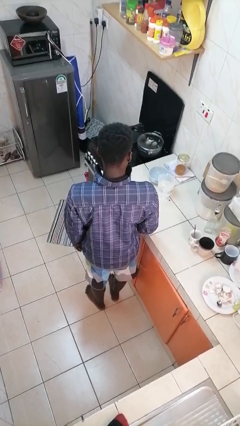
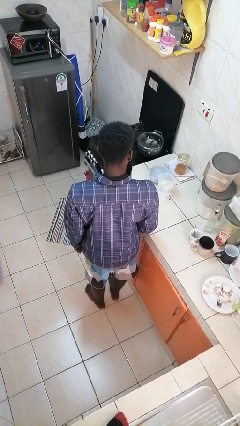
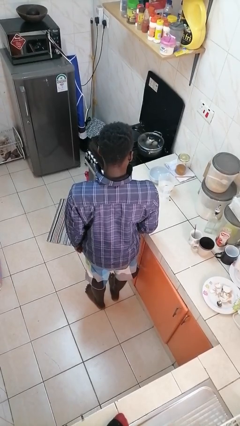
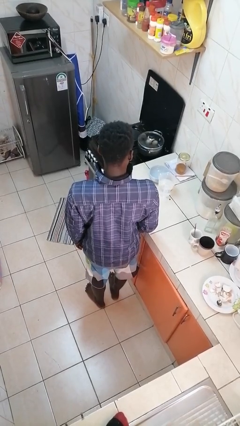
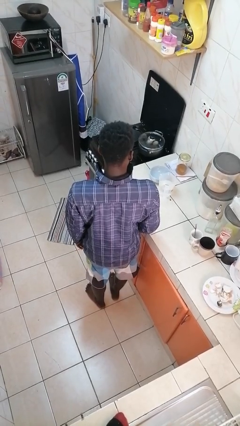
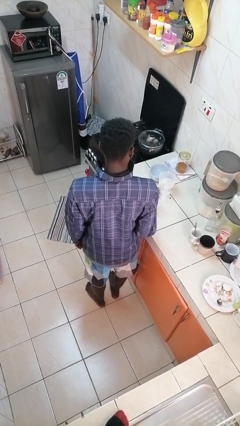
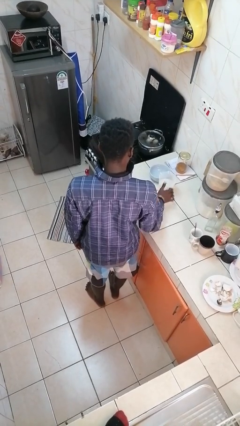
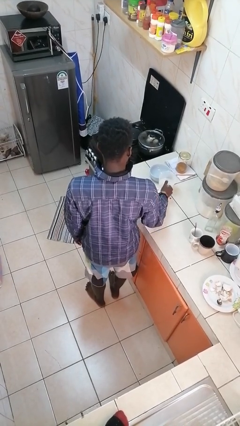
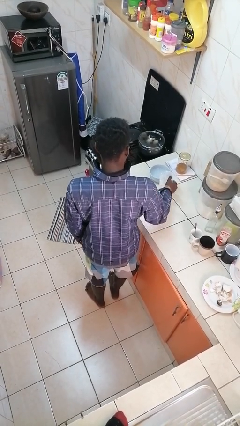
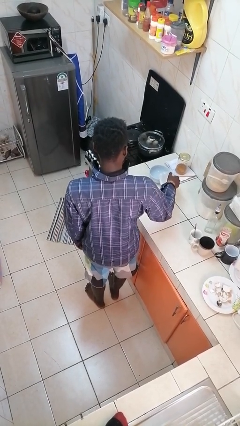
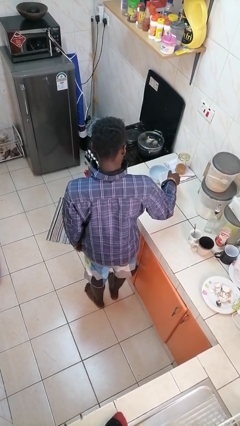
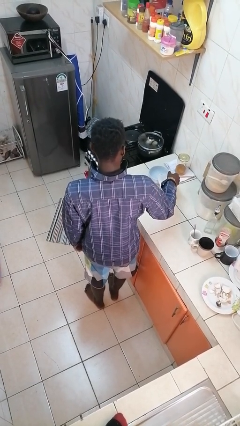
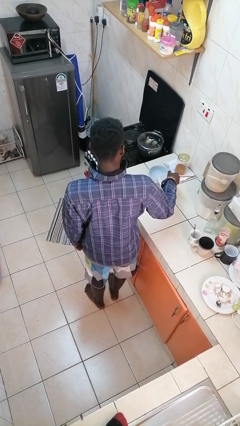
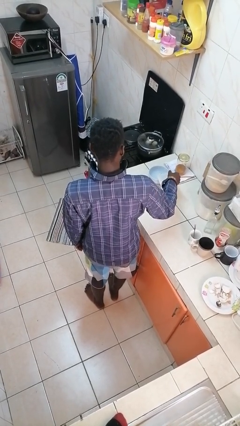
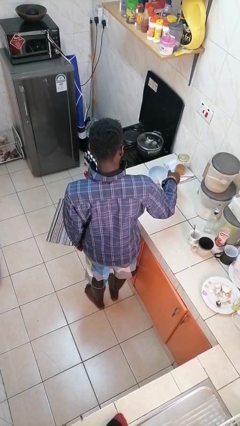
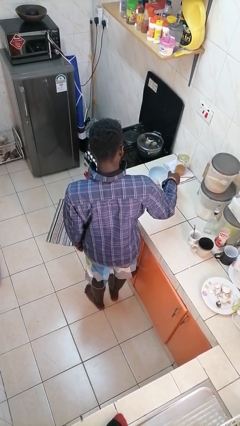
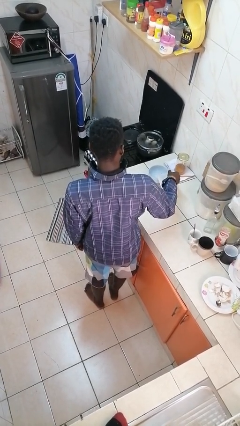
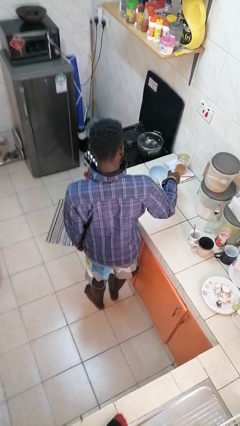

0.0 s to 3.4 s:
person pours into bowl

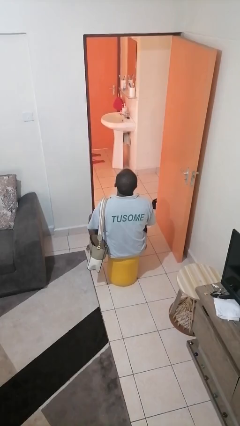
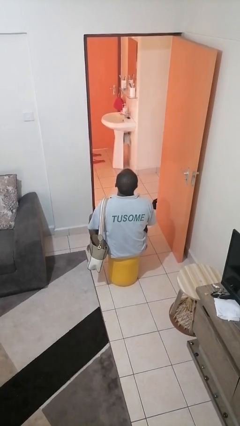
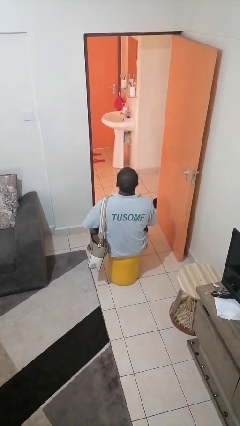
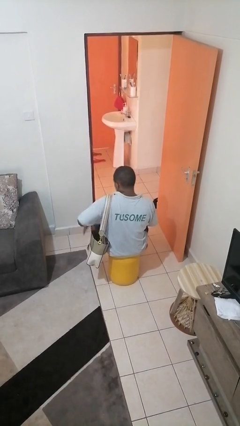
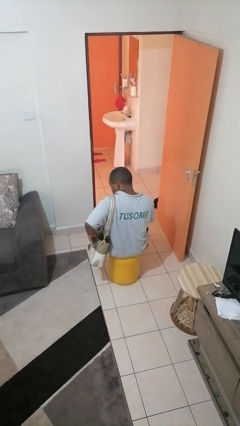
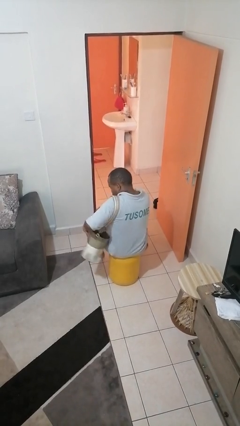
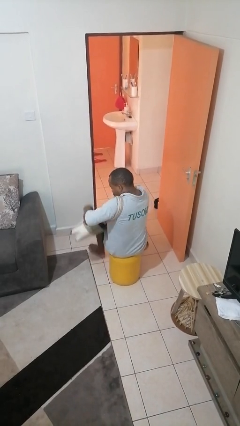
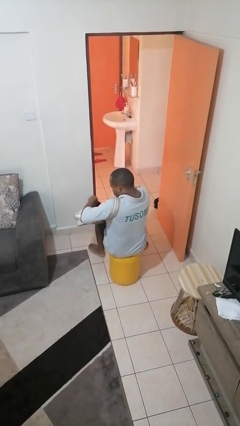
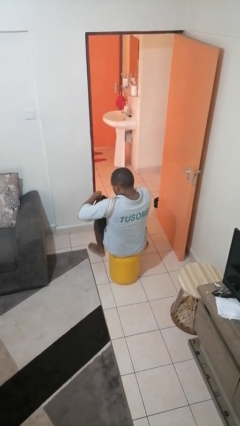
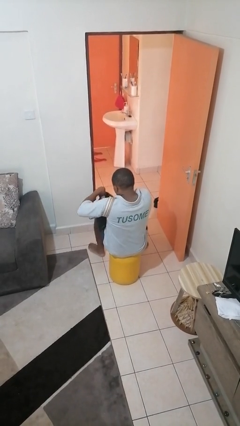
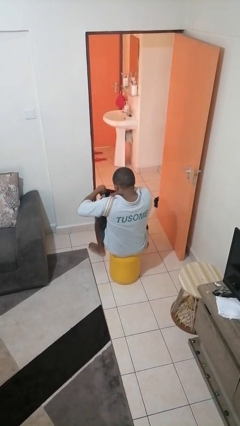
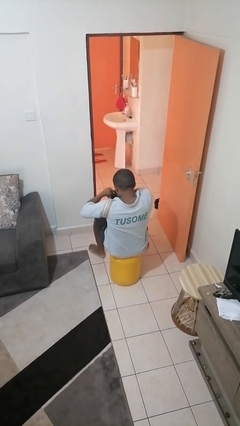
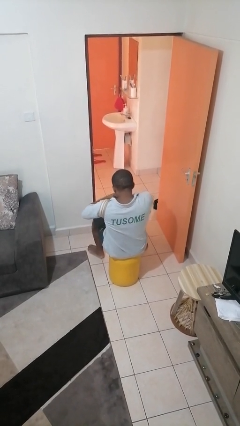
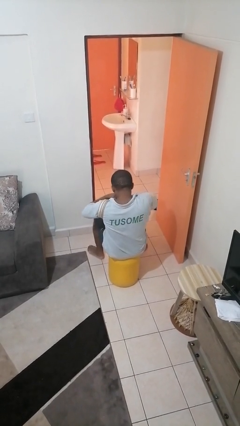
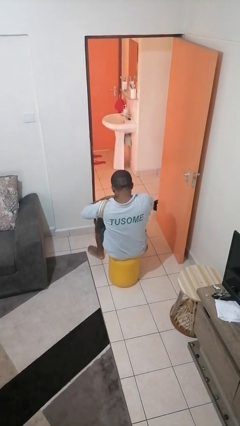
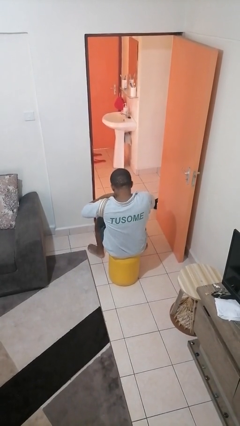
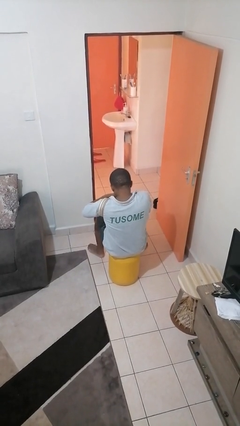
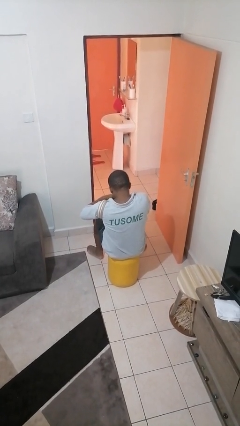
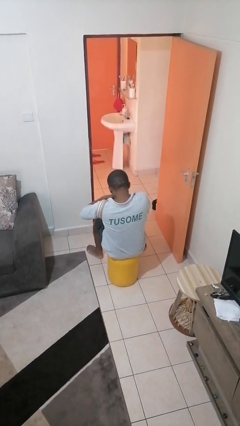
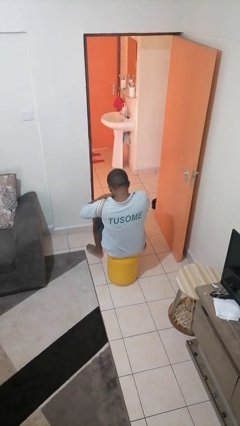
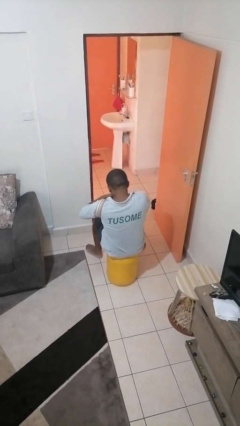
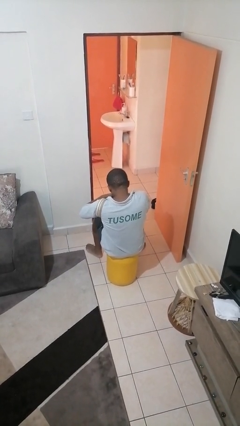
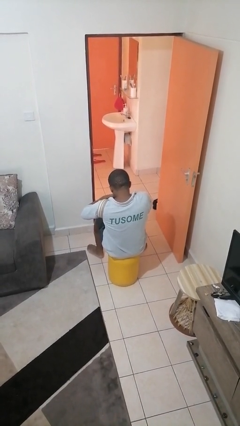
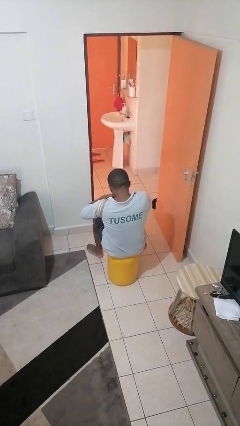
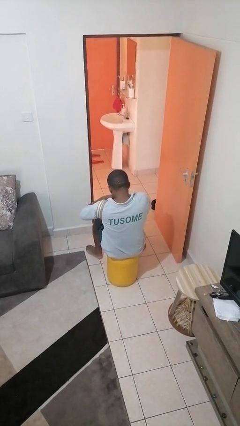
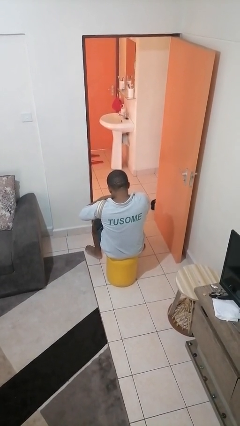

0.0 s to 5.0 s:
person searches in purse

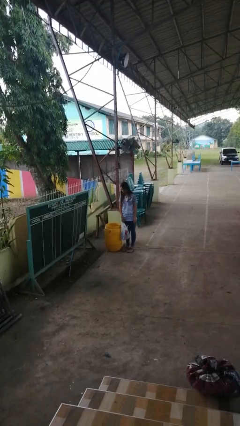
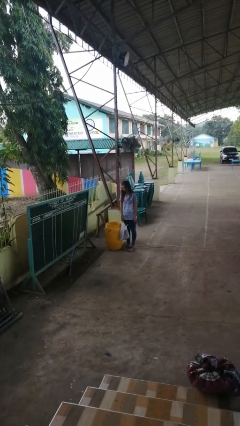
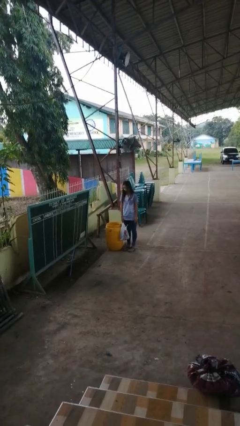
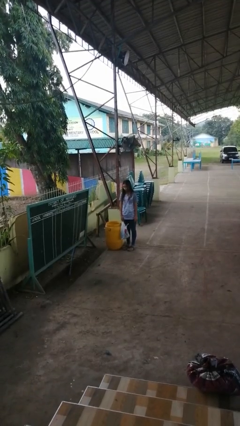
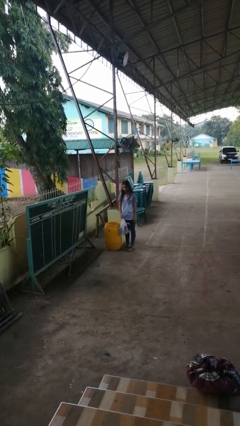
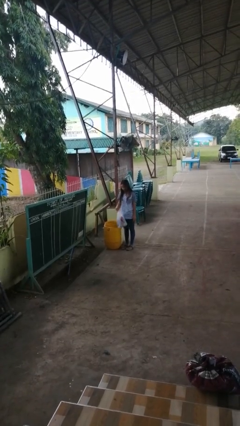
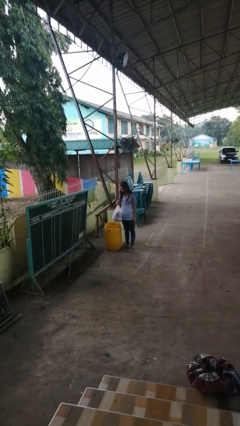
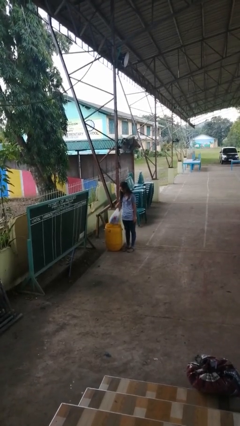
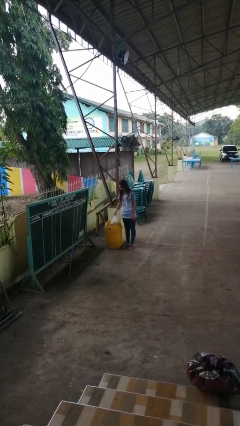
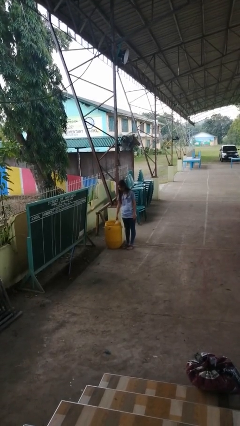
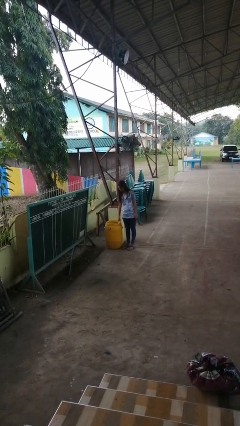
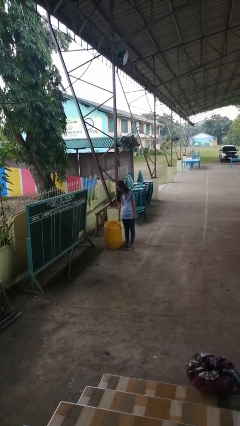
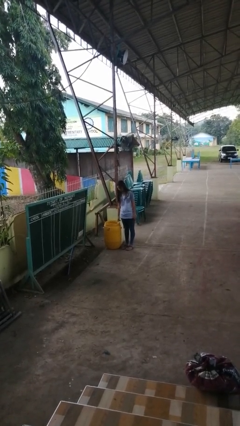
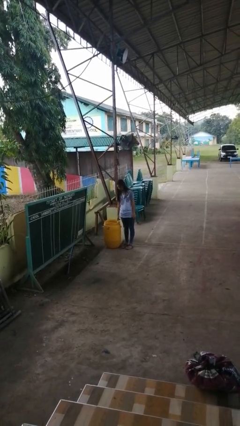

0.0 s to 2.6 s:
person inserts trashbag into trashcan

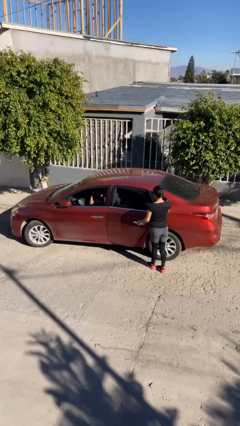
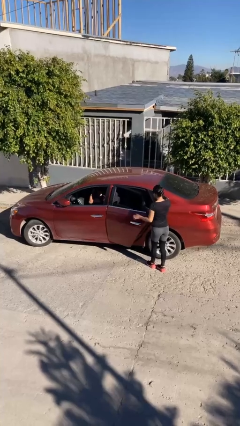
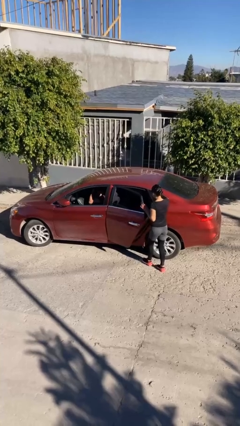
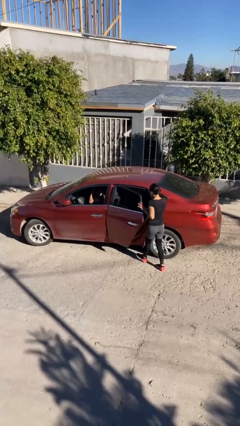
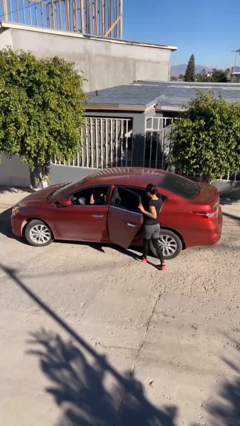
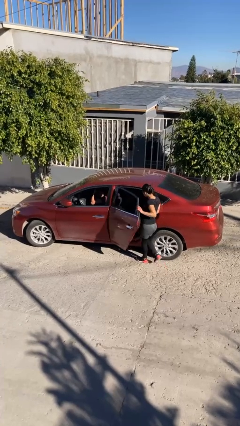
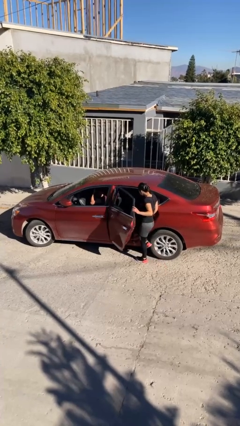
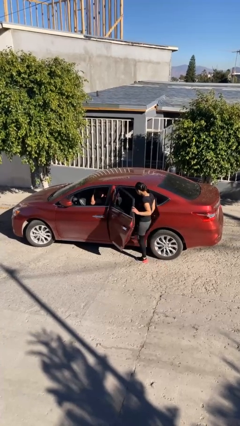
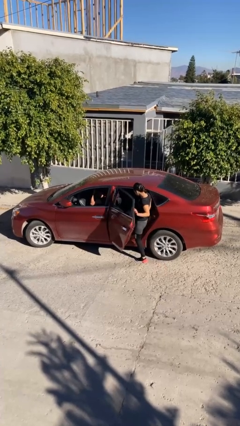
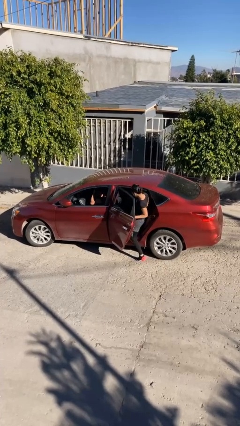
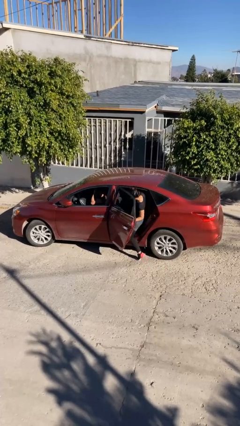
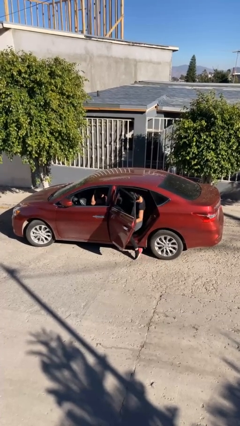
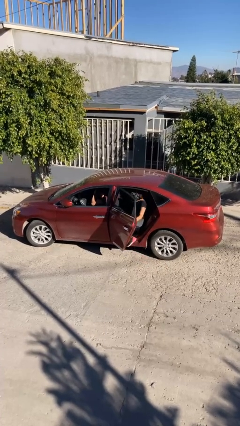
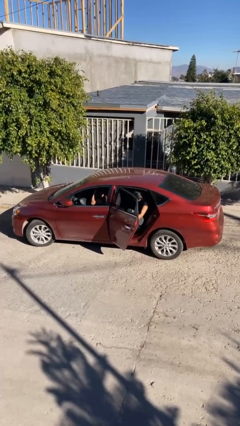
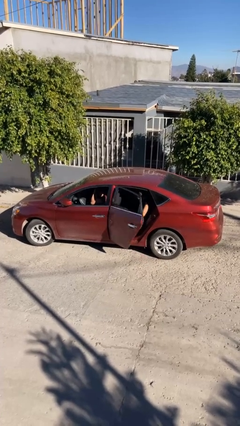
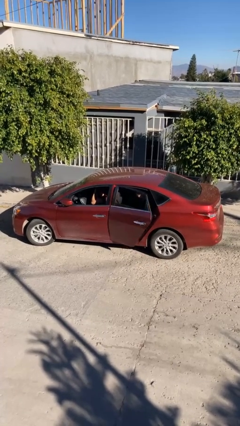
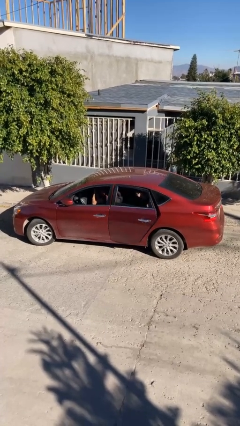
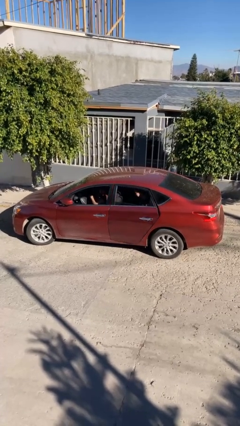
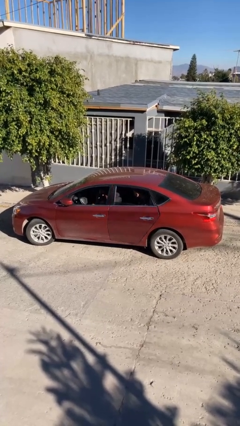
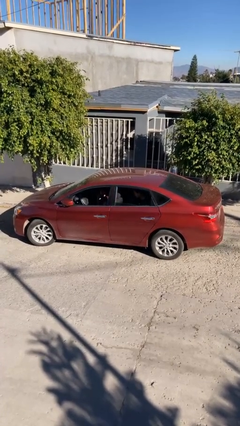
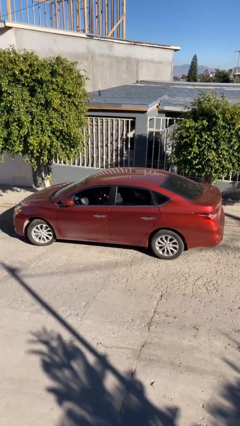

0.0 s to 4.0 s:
car picks up person

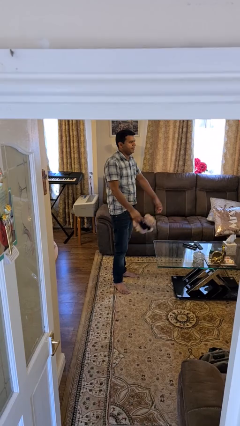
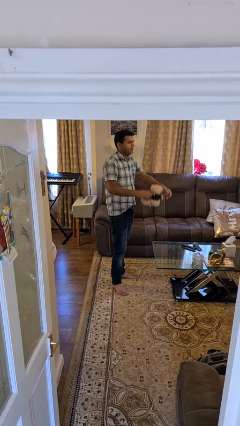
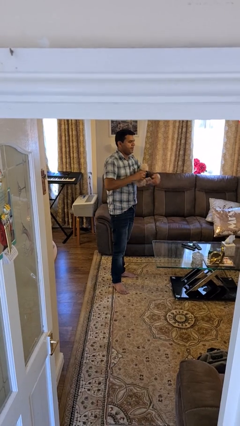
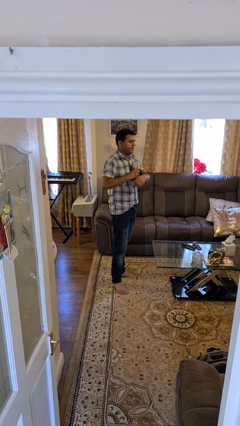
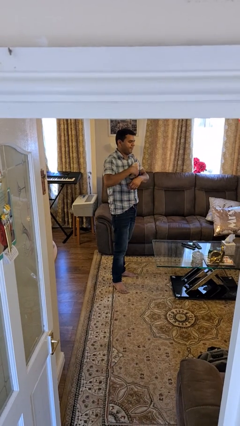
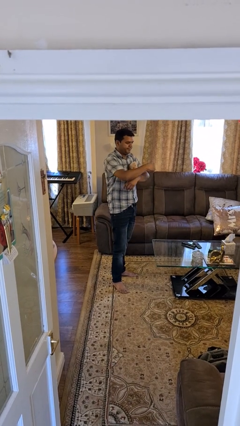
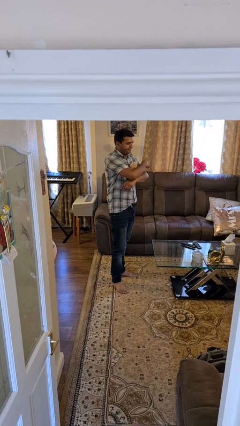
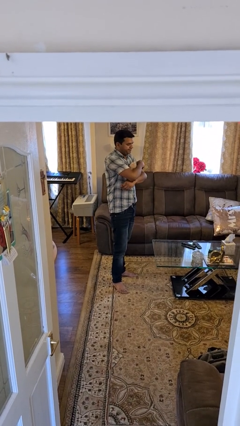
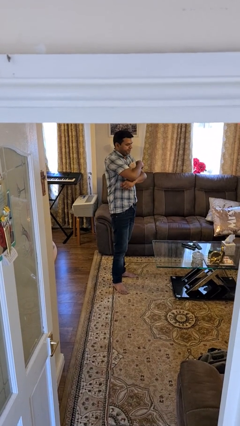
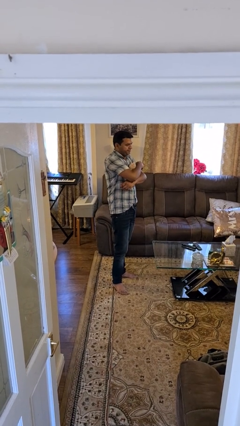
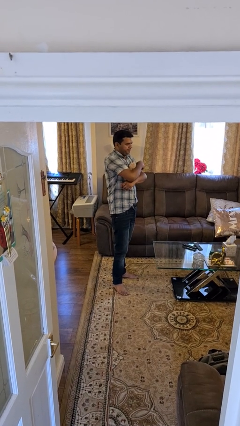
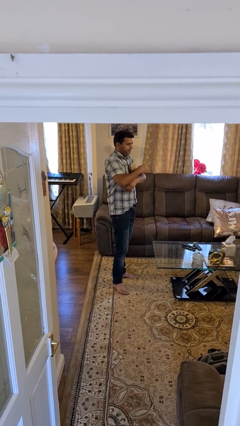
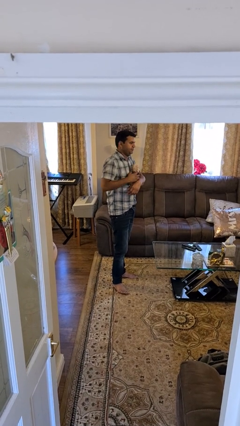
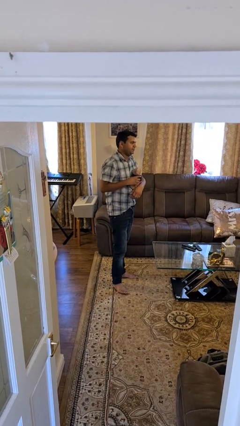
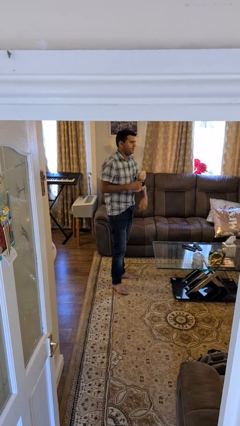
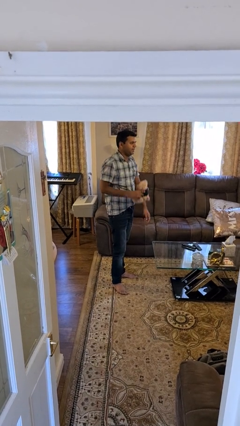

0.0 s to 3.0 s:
person hugs stuffed animal
